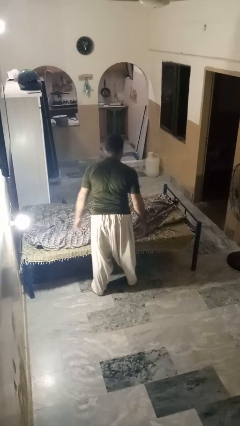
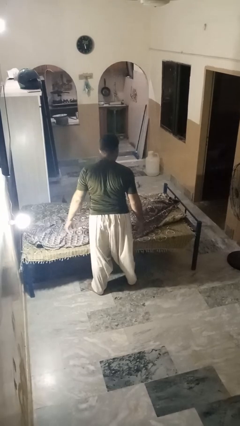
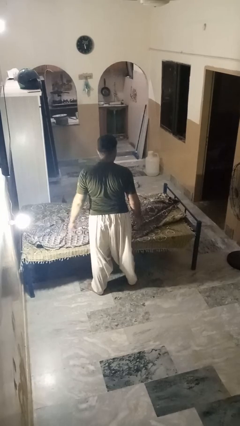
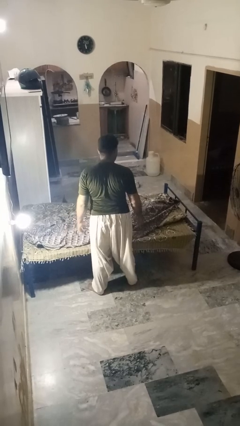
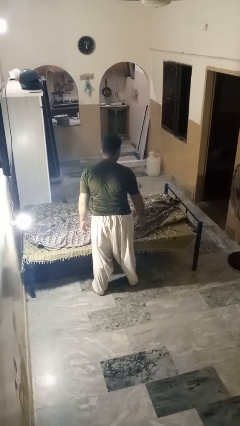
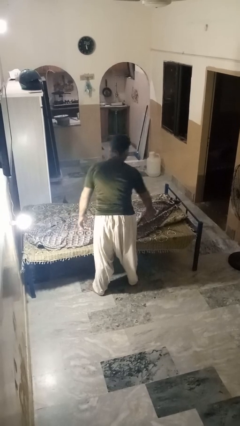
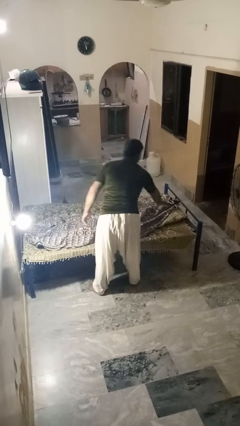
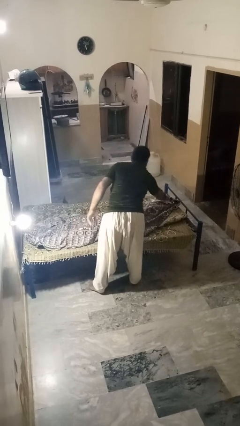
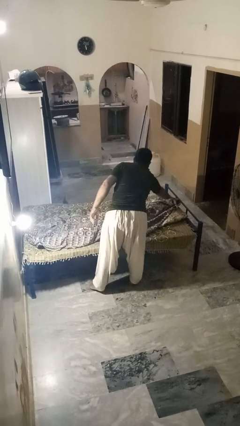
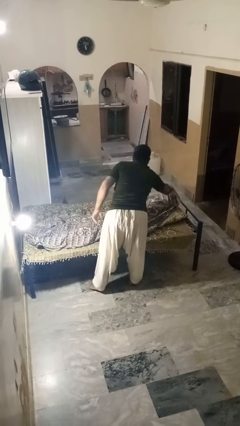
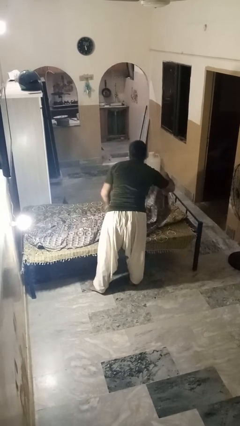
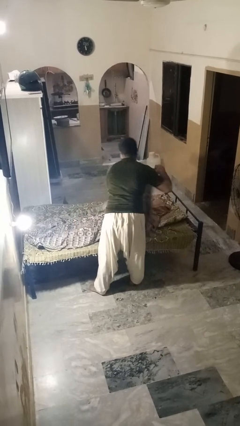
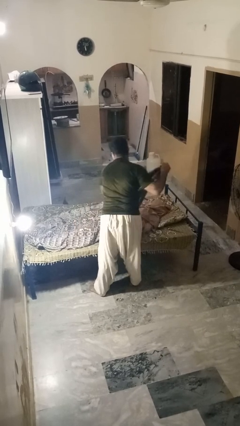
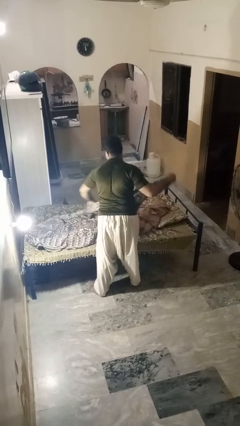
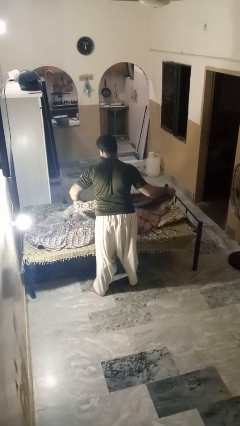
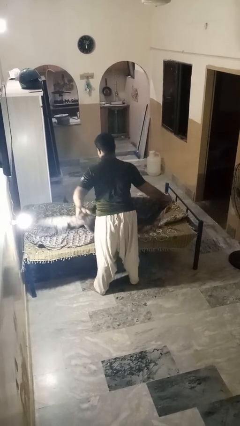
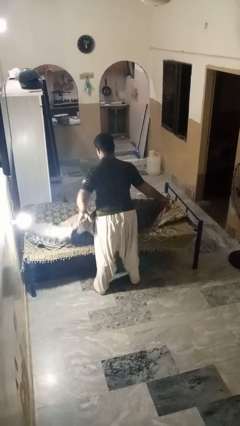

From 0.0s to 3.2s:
person uncovers friend with blanket

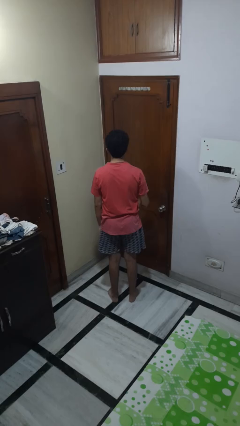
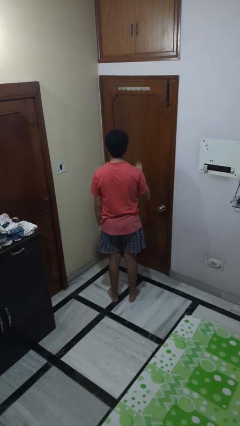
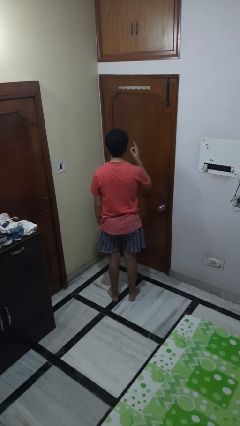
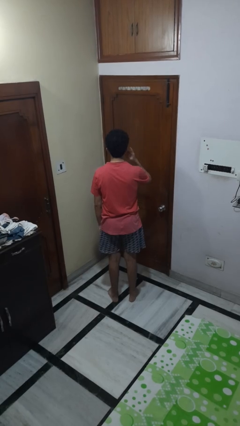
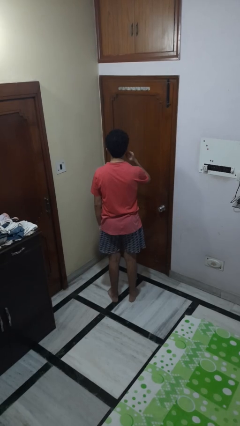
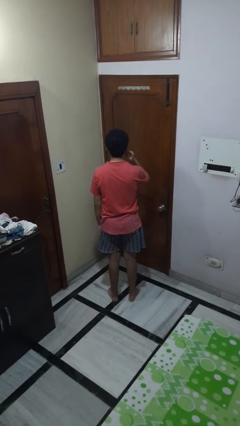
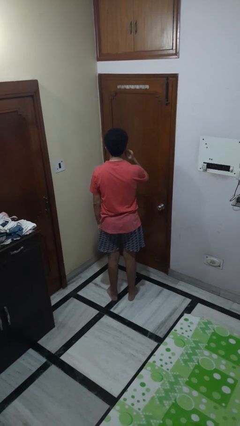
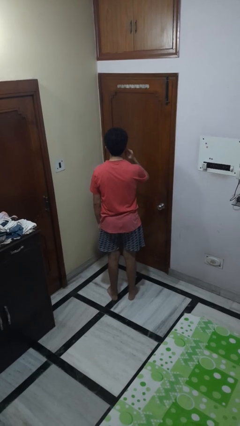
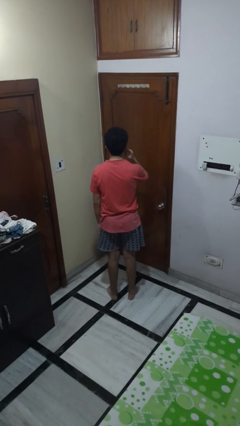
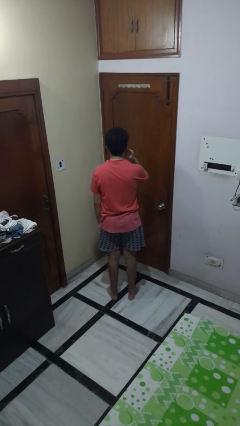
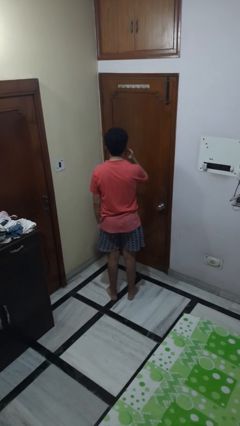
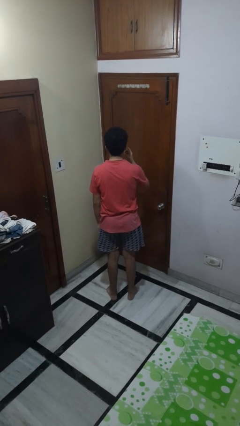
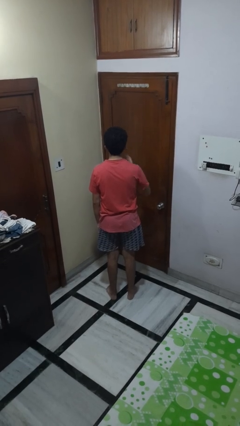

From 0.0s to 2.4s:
person gestures listen closely

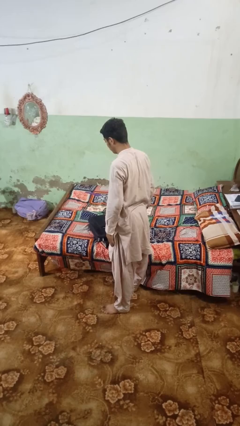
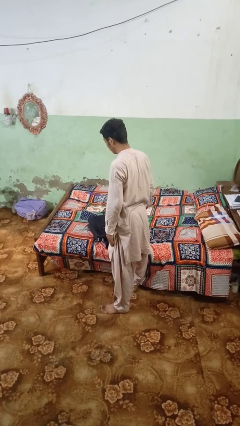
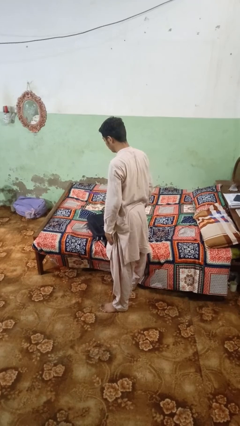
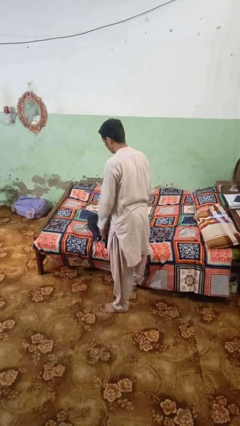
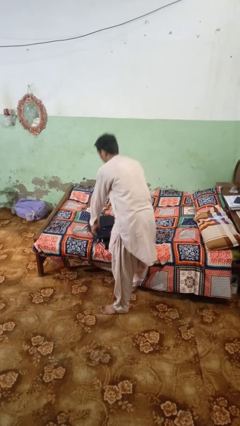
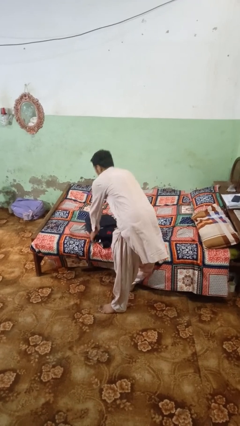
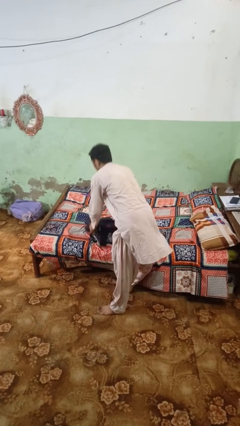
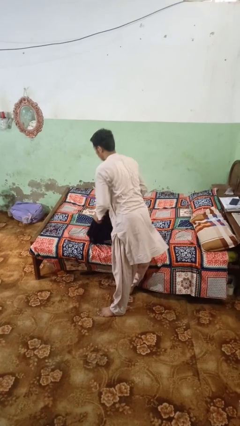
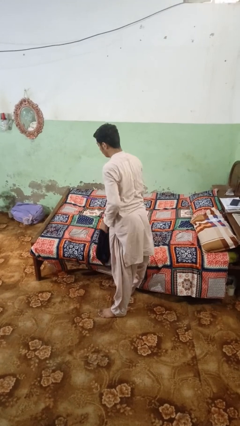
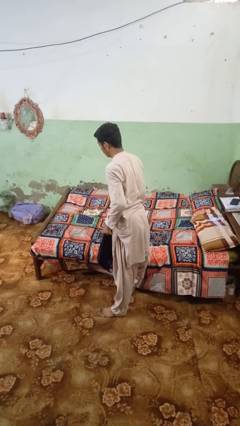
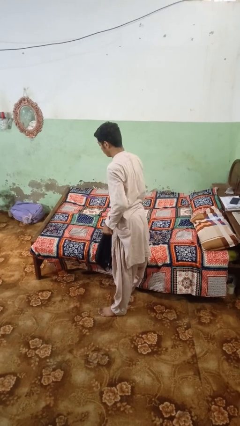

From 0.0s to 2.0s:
person picks up object from bed

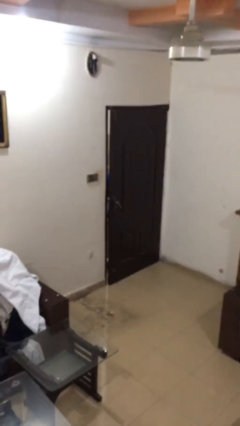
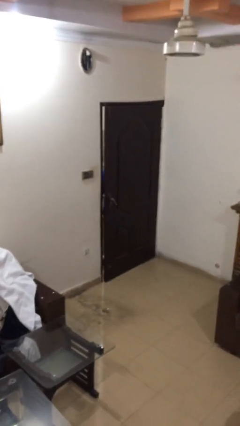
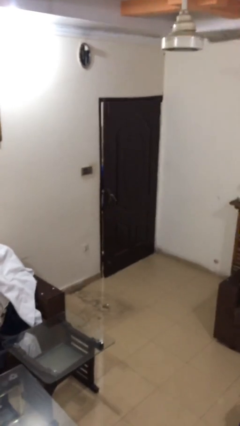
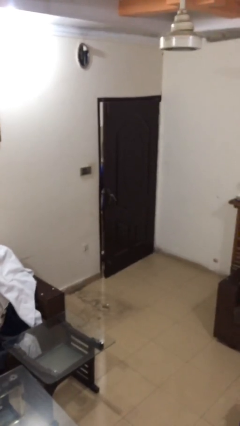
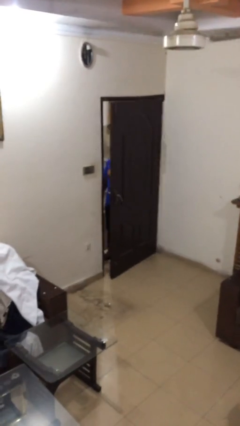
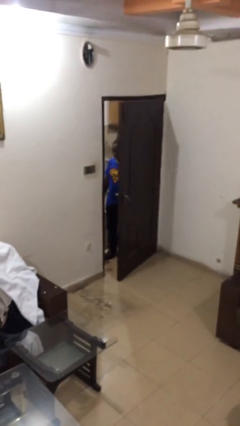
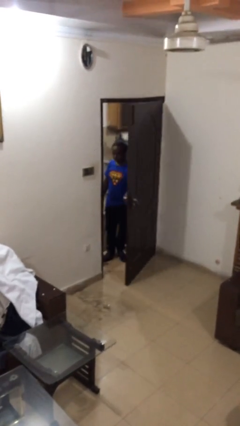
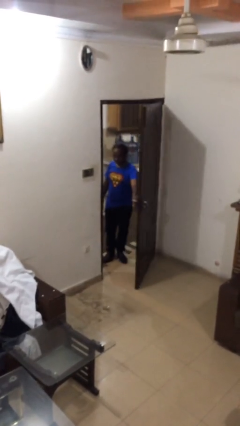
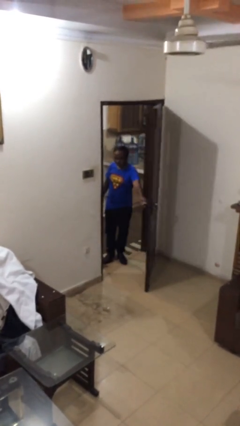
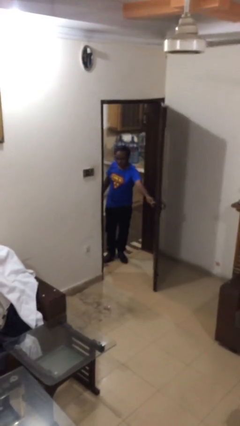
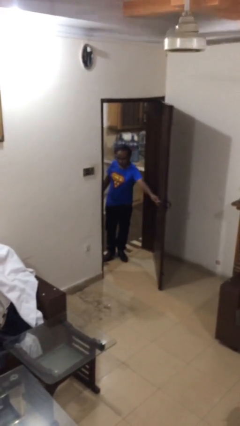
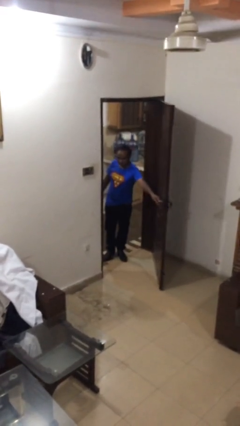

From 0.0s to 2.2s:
person opens facility door

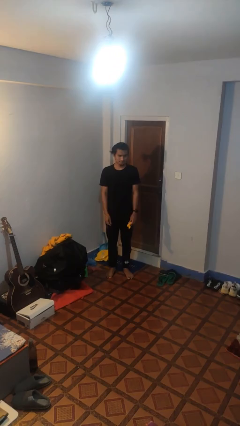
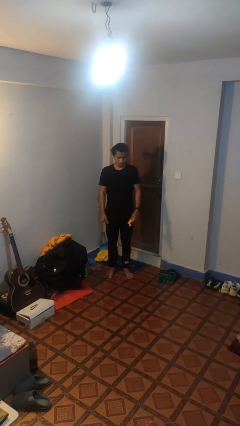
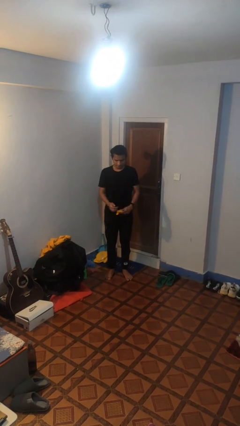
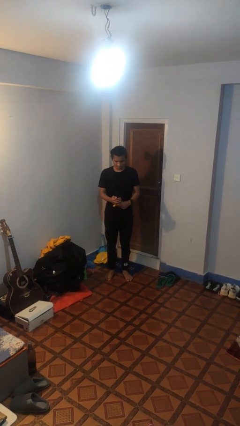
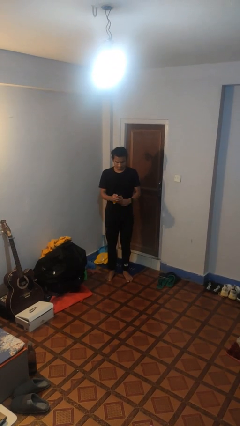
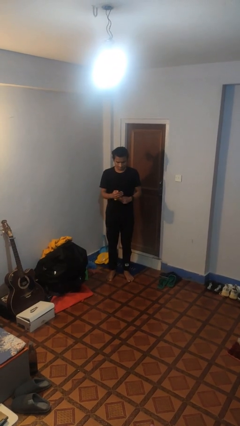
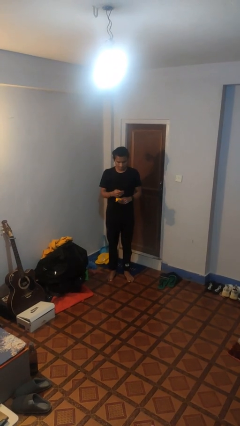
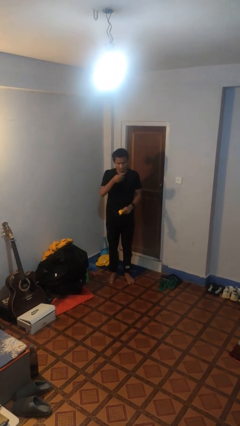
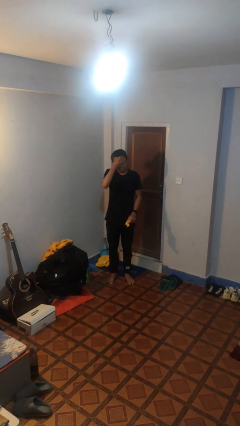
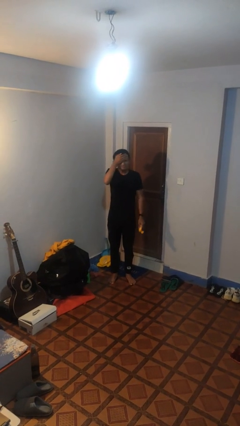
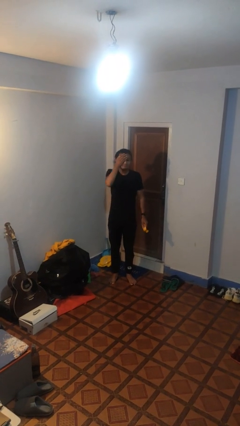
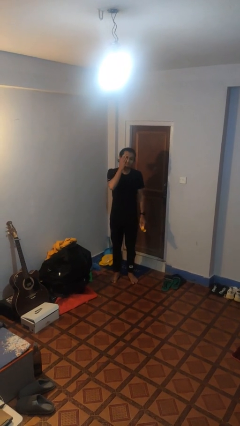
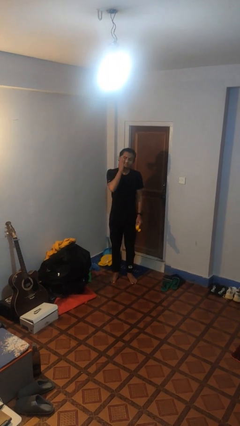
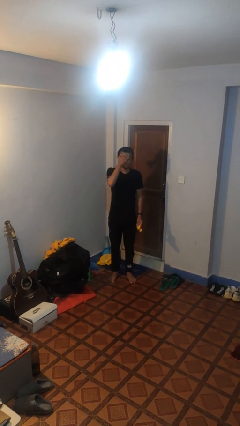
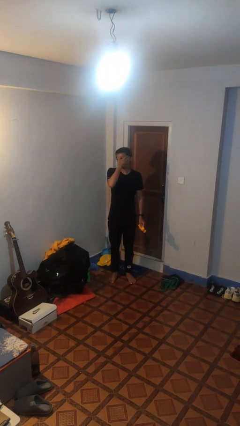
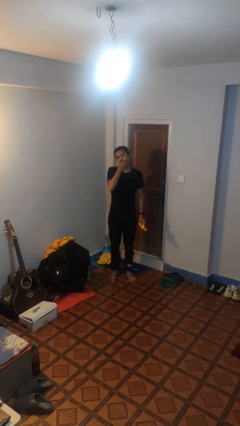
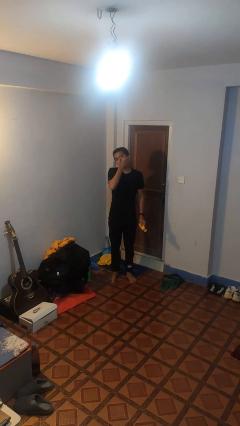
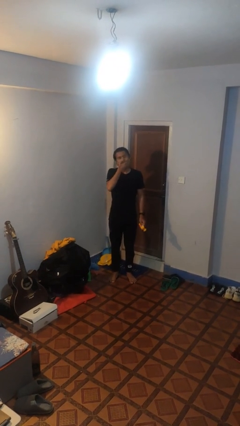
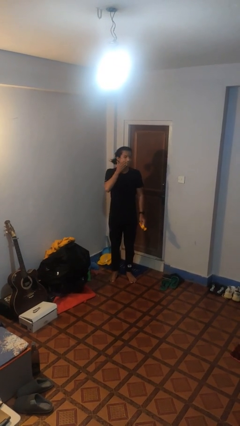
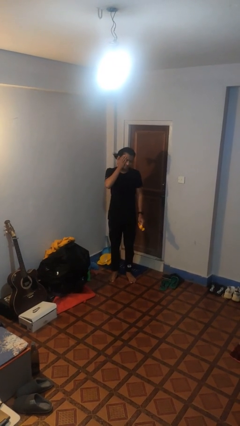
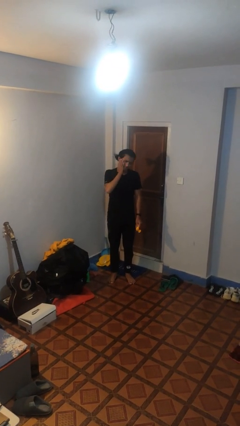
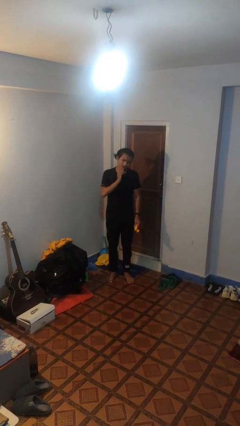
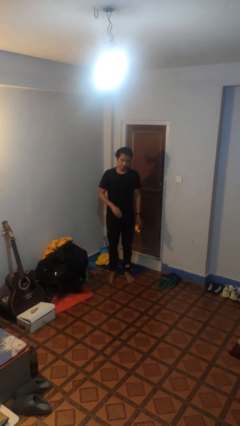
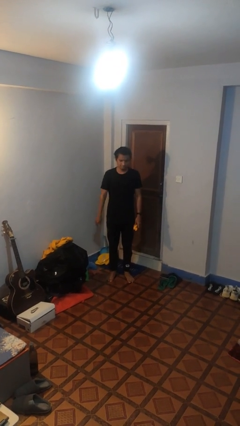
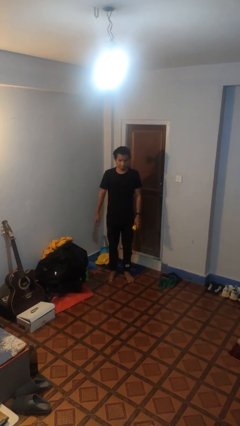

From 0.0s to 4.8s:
person applies sunscreen

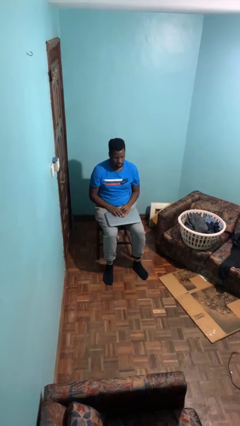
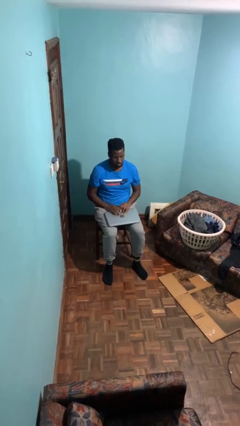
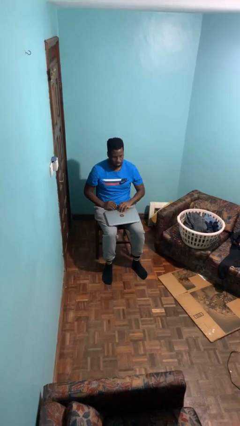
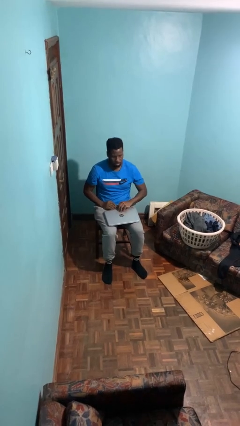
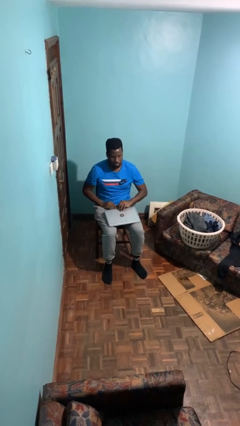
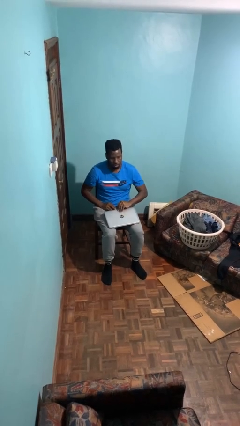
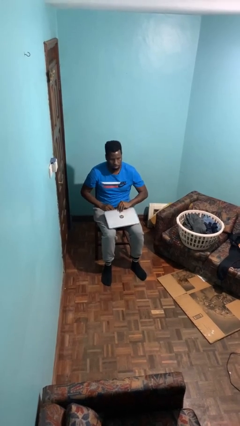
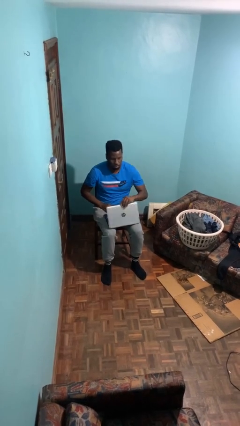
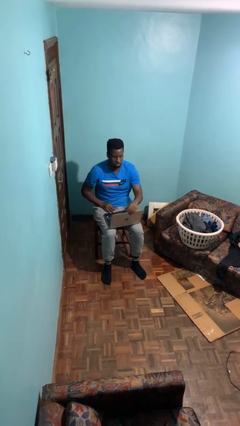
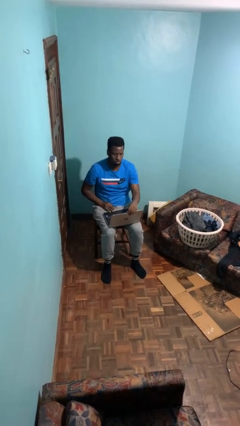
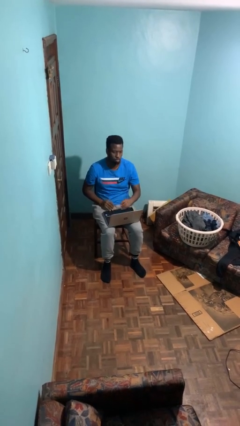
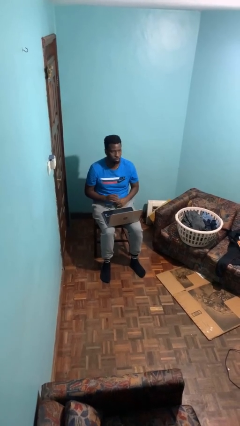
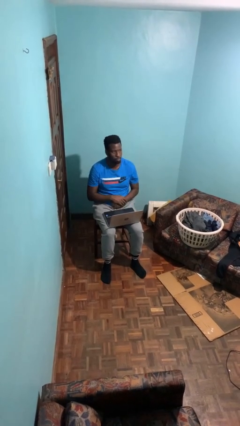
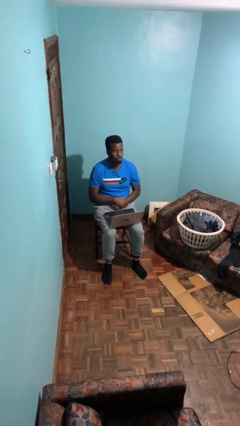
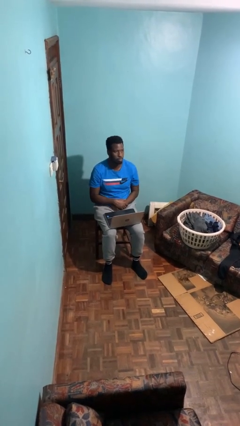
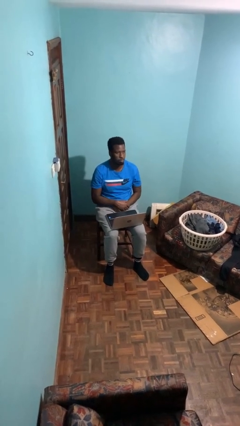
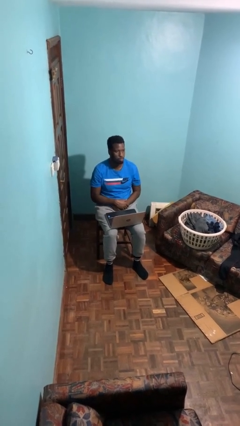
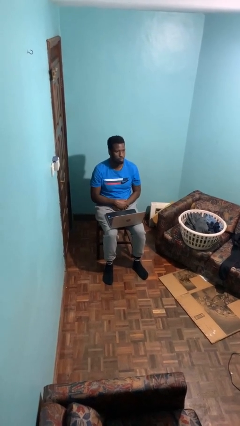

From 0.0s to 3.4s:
person opens laptop
